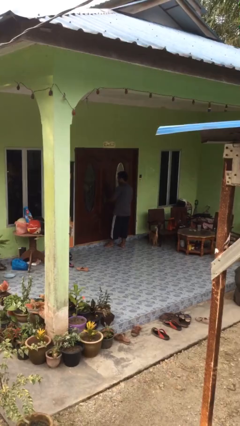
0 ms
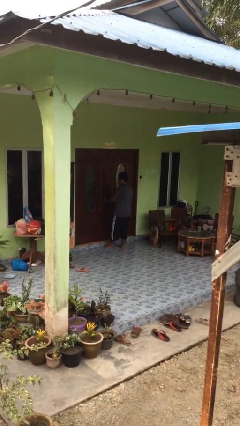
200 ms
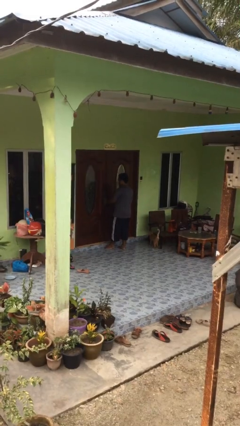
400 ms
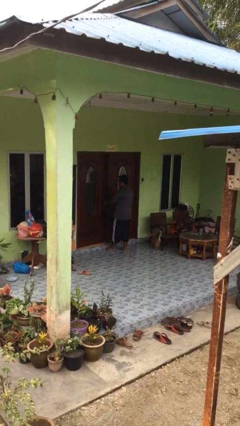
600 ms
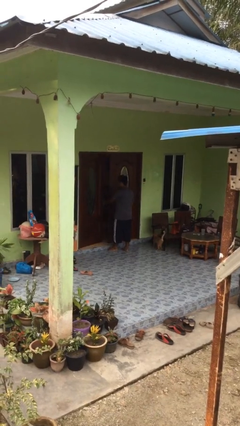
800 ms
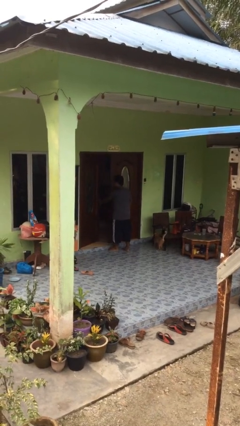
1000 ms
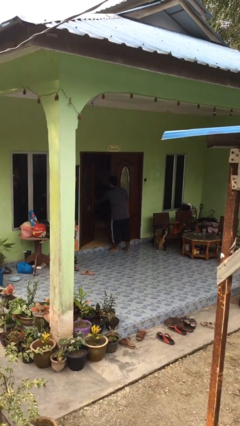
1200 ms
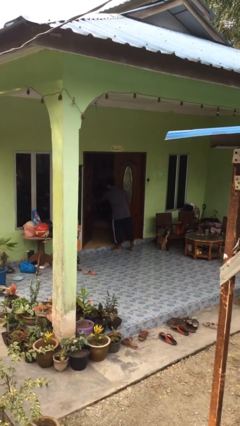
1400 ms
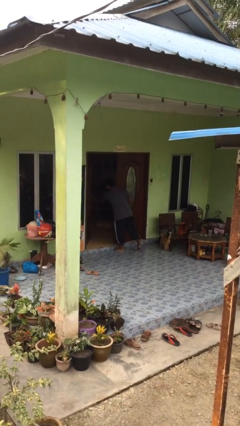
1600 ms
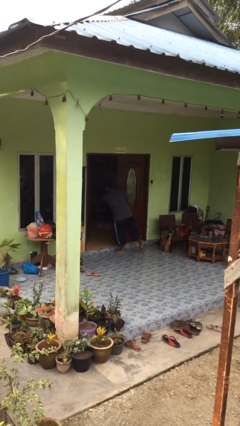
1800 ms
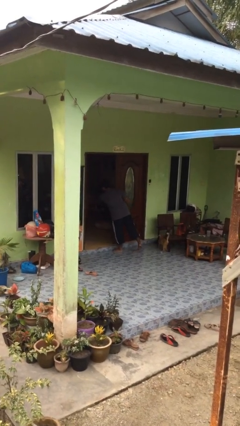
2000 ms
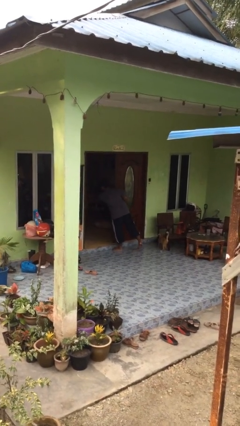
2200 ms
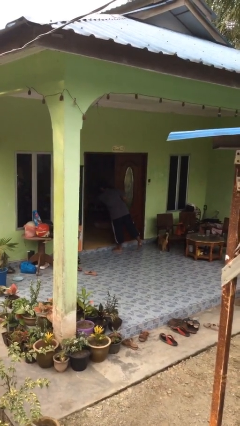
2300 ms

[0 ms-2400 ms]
person opens facility door

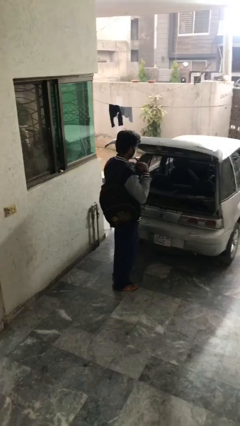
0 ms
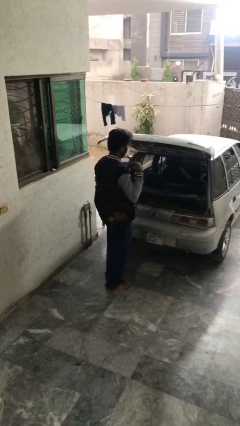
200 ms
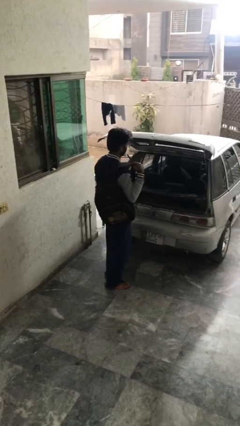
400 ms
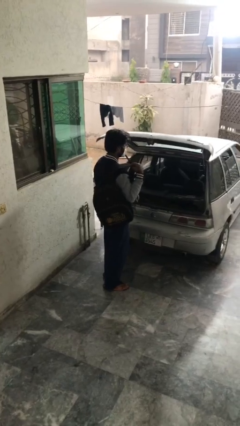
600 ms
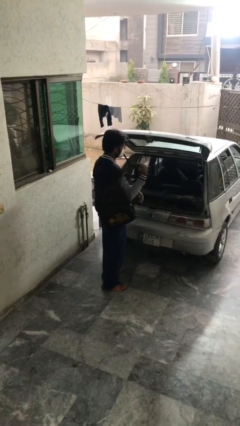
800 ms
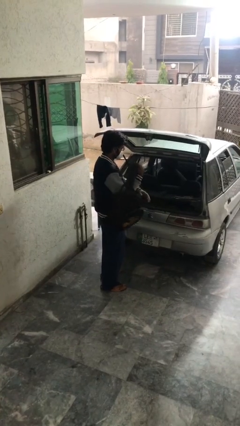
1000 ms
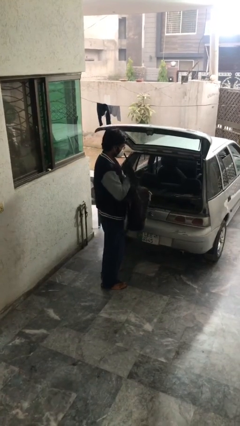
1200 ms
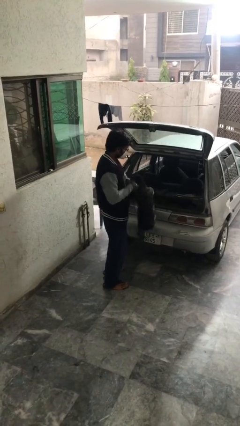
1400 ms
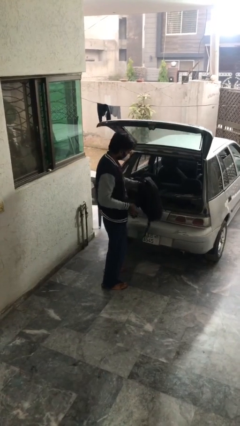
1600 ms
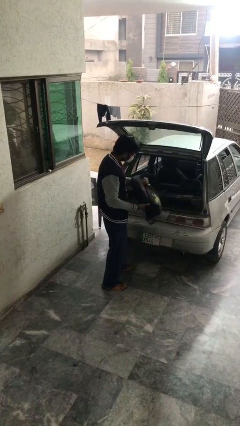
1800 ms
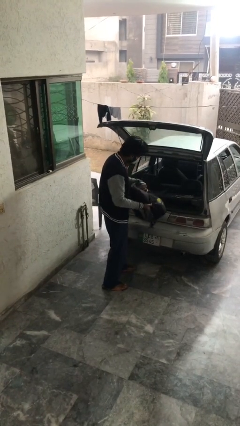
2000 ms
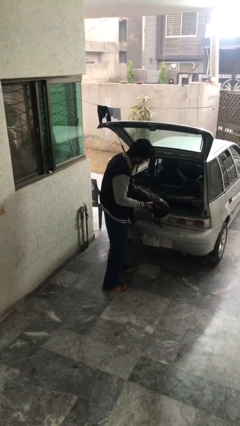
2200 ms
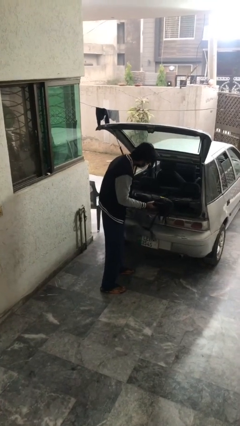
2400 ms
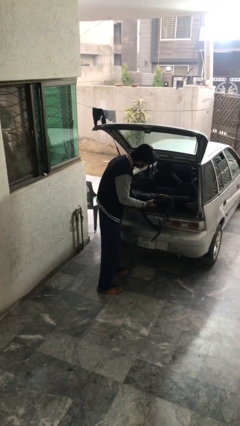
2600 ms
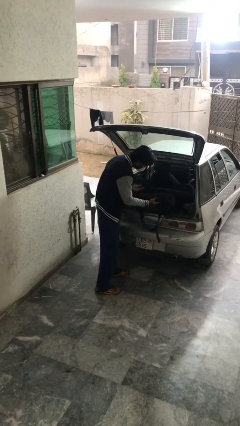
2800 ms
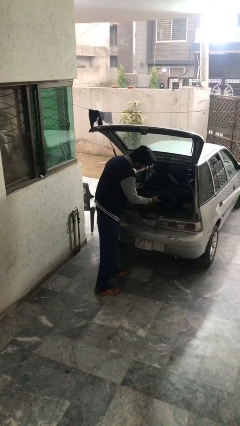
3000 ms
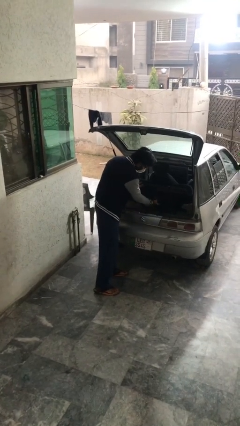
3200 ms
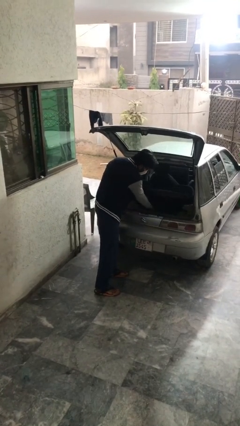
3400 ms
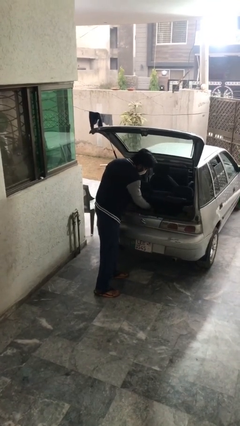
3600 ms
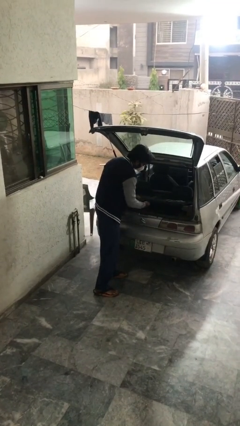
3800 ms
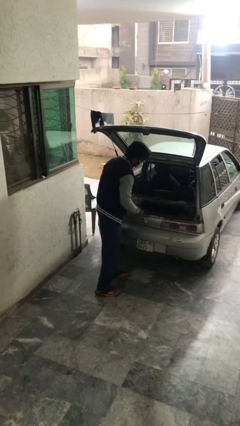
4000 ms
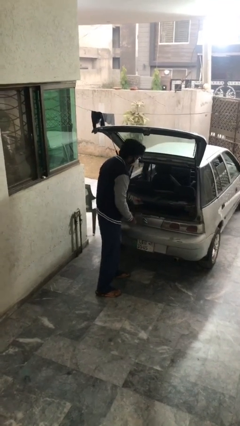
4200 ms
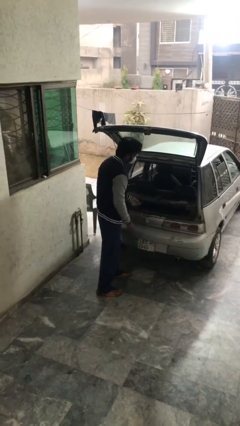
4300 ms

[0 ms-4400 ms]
person loads car

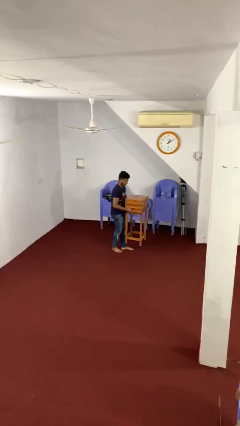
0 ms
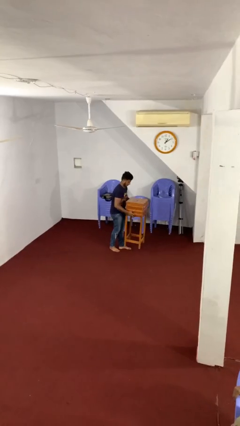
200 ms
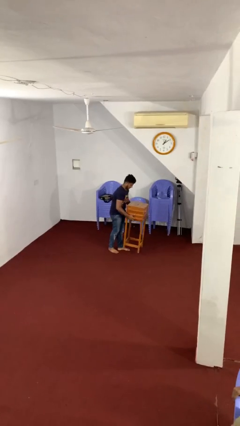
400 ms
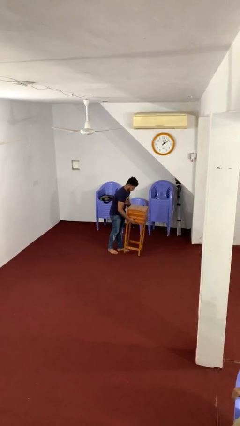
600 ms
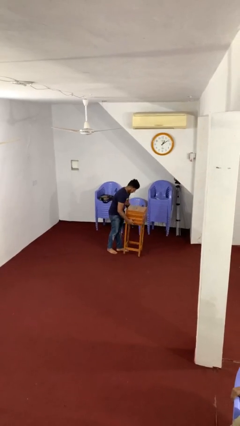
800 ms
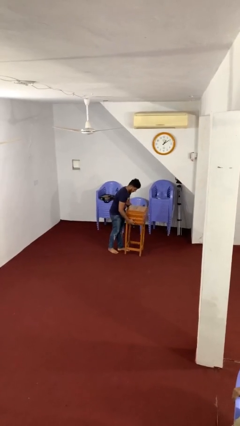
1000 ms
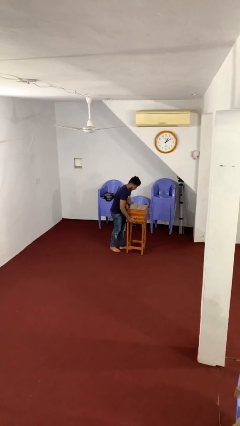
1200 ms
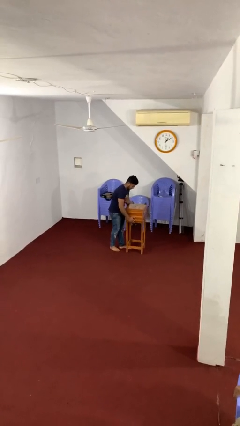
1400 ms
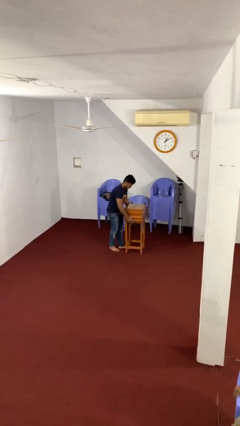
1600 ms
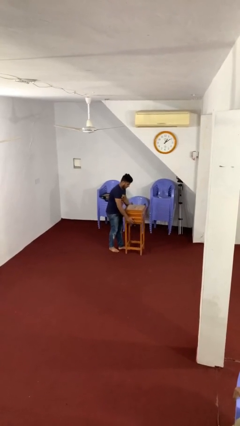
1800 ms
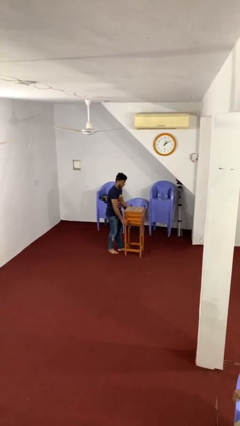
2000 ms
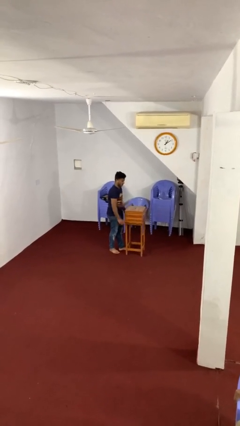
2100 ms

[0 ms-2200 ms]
person puts down object on floor

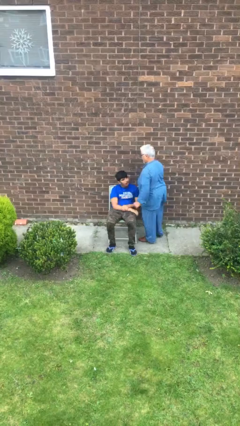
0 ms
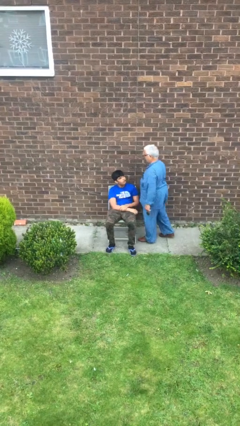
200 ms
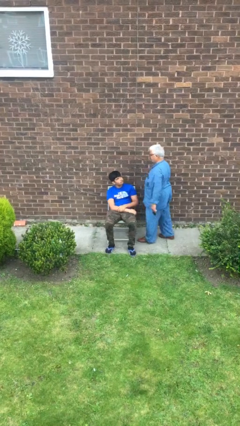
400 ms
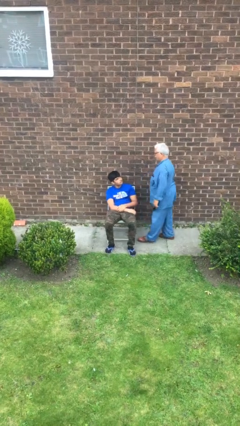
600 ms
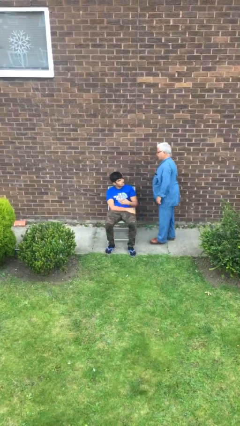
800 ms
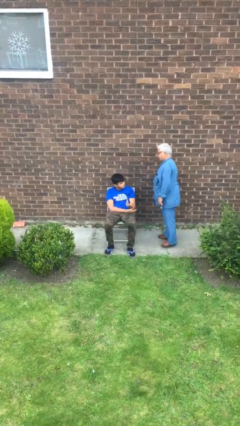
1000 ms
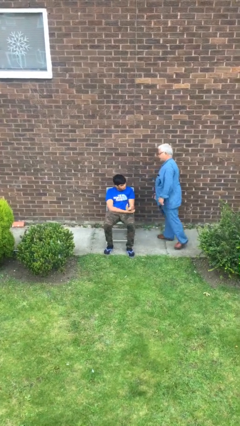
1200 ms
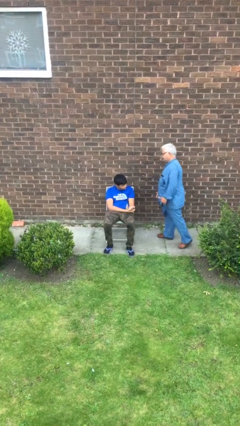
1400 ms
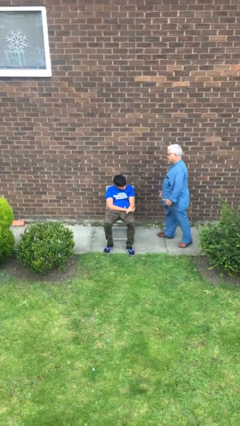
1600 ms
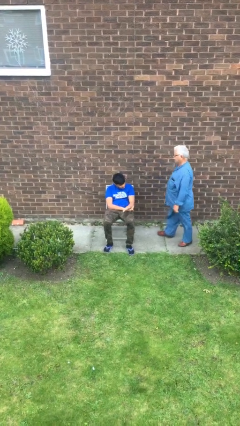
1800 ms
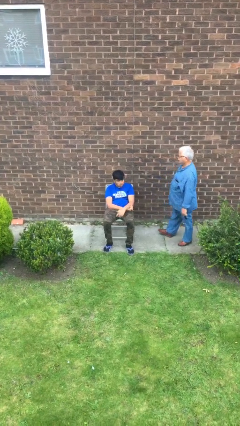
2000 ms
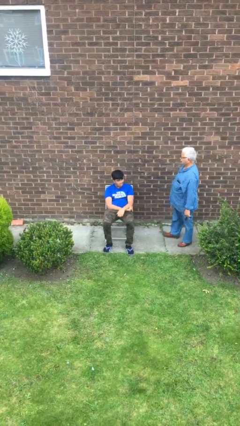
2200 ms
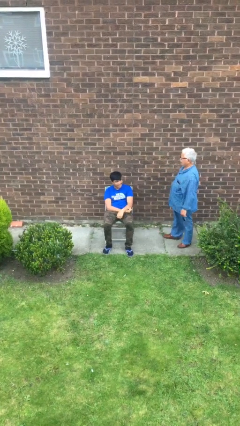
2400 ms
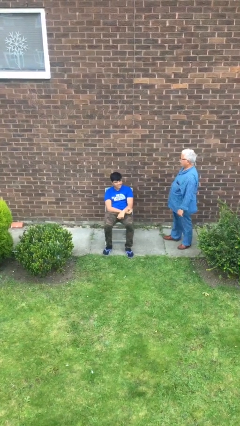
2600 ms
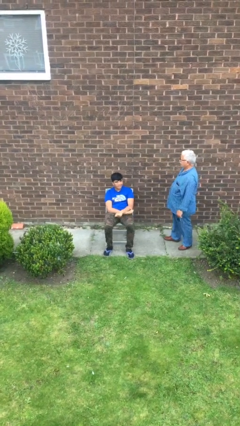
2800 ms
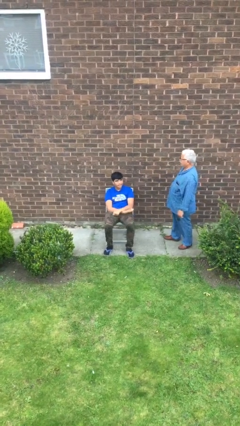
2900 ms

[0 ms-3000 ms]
person talks to person

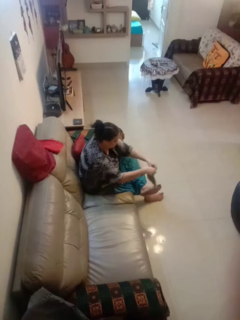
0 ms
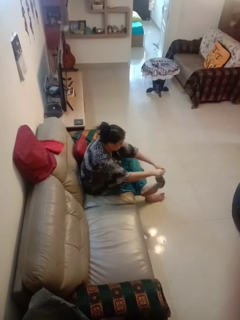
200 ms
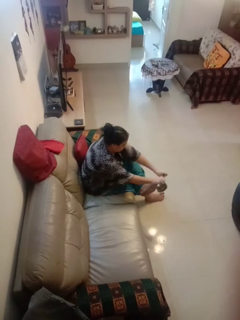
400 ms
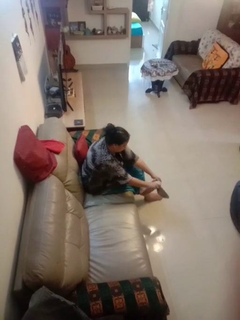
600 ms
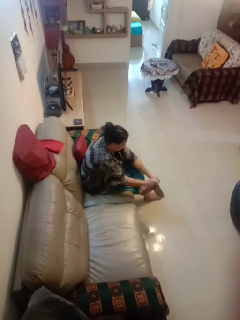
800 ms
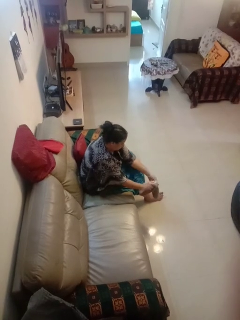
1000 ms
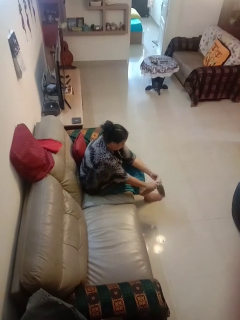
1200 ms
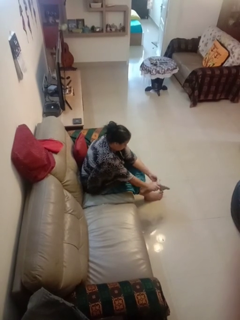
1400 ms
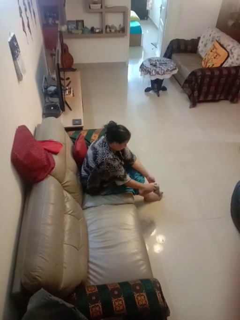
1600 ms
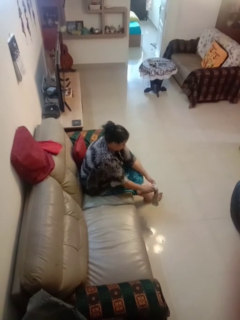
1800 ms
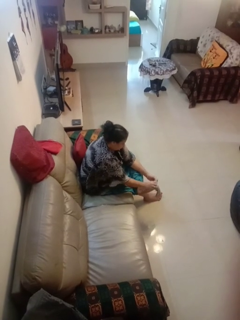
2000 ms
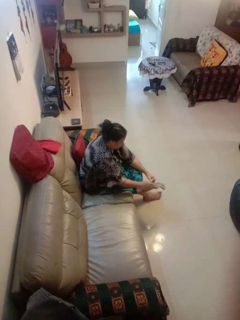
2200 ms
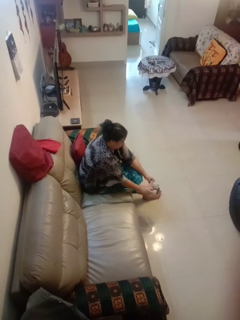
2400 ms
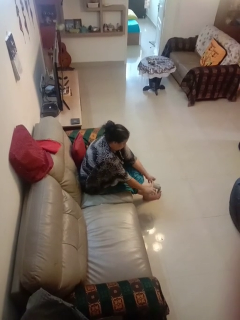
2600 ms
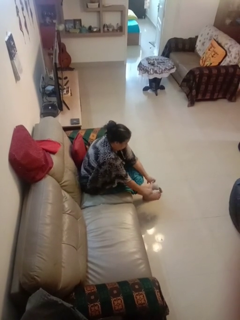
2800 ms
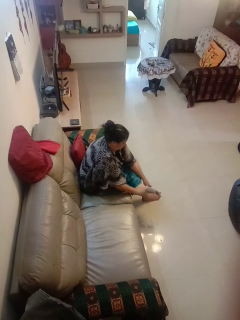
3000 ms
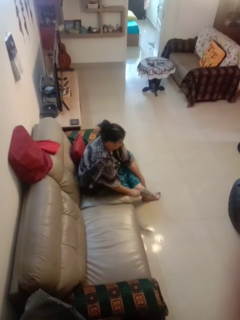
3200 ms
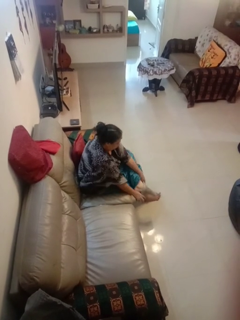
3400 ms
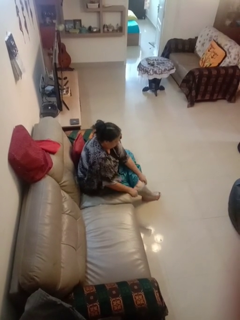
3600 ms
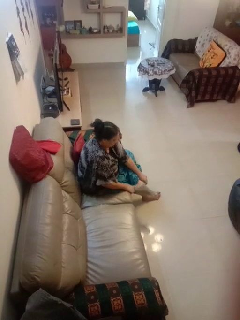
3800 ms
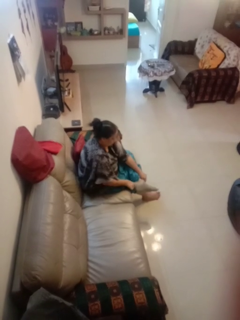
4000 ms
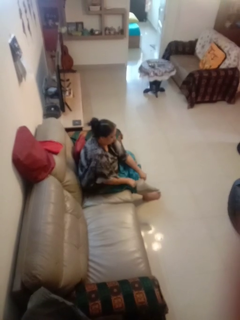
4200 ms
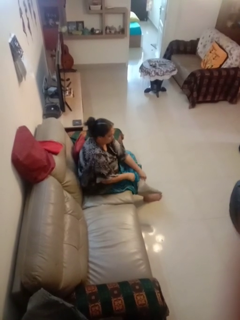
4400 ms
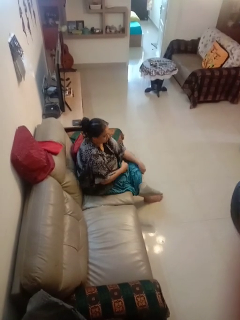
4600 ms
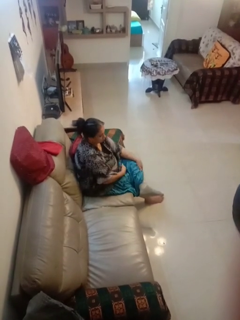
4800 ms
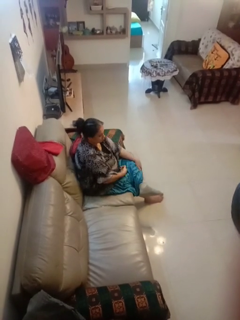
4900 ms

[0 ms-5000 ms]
person puts on socks

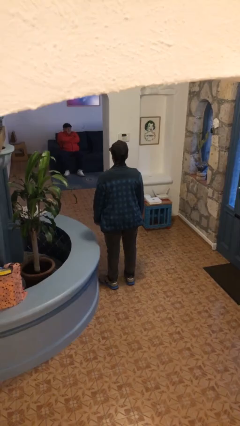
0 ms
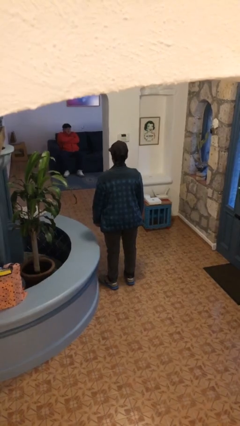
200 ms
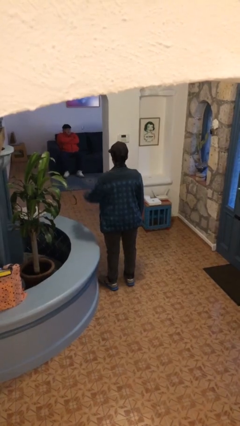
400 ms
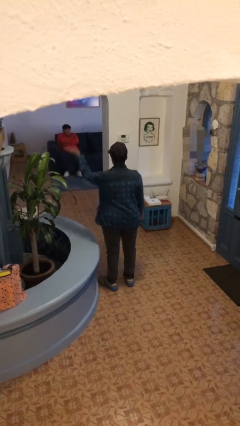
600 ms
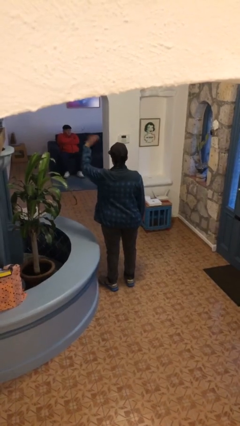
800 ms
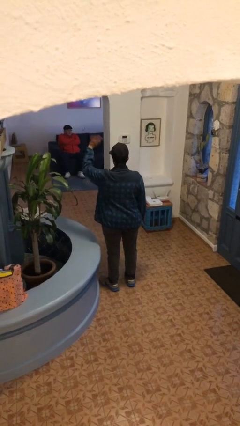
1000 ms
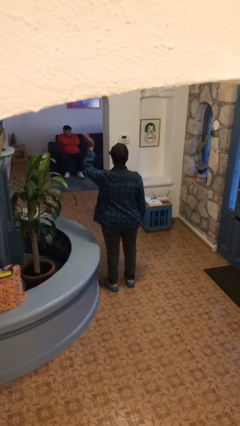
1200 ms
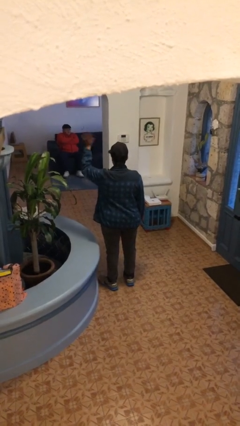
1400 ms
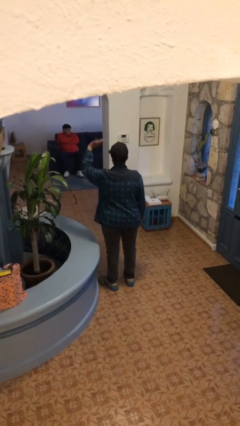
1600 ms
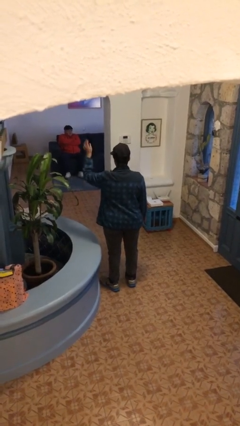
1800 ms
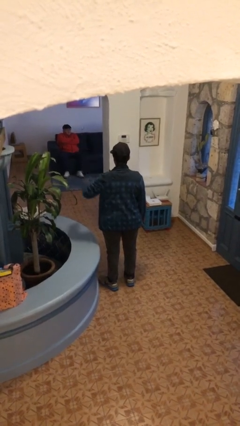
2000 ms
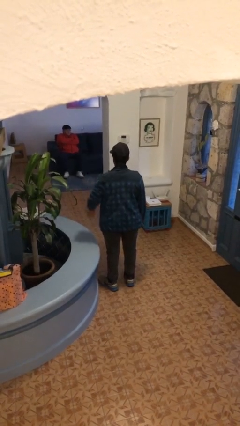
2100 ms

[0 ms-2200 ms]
person waves at person
